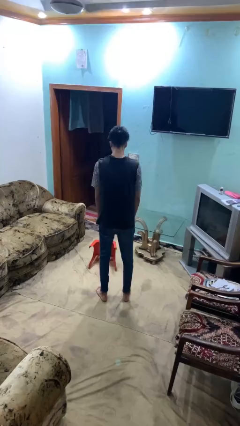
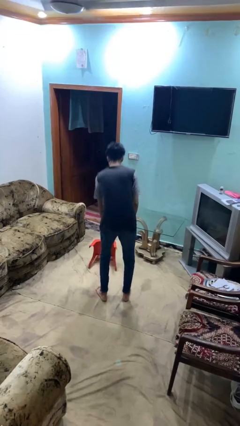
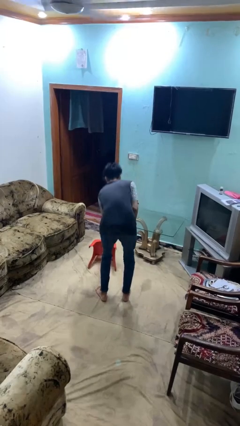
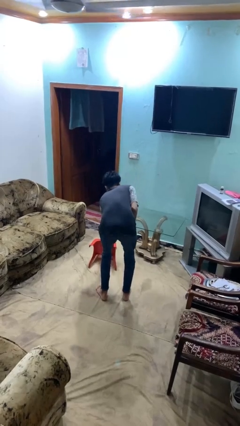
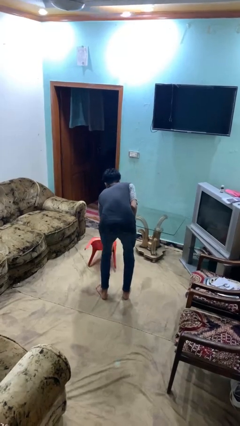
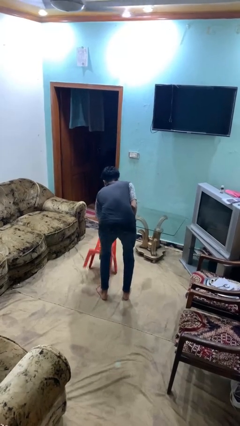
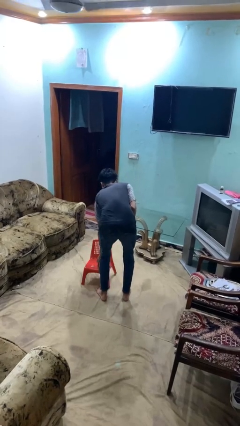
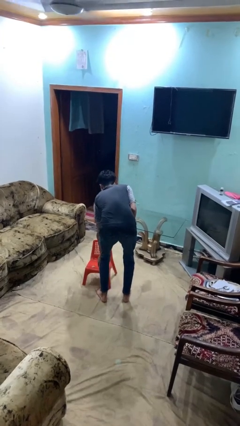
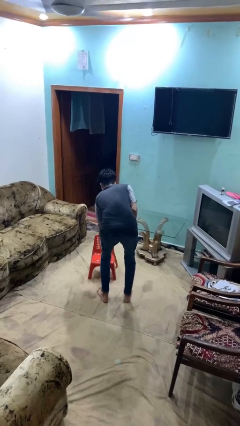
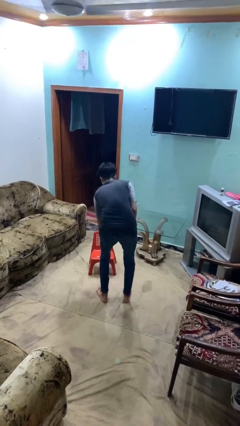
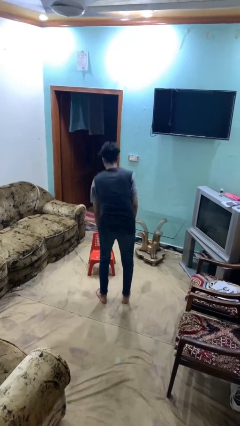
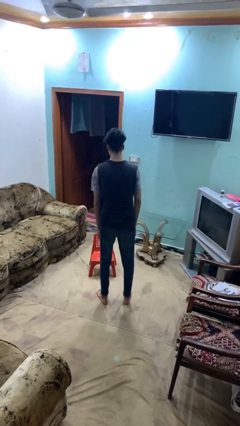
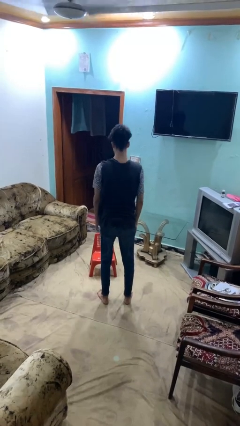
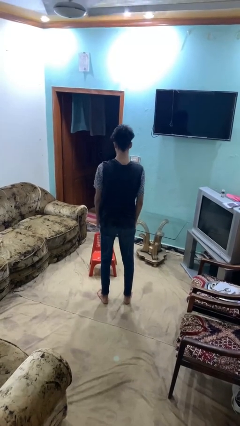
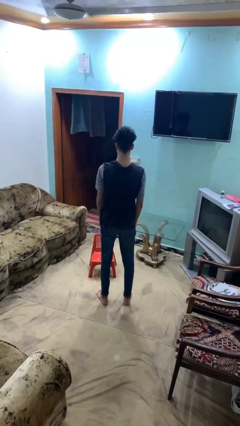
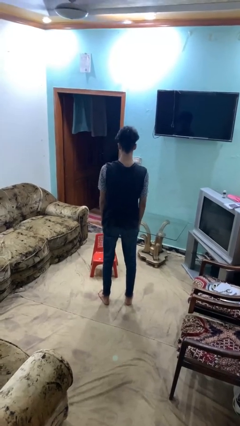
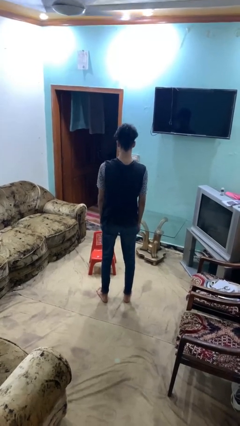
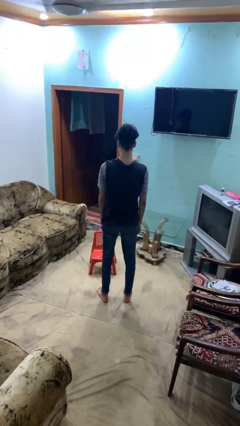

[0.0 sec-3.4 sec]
person sets upright furniture

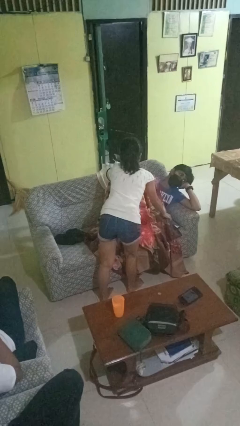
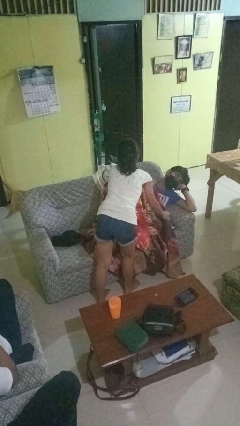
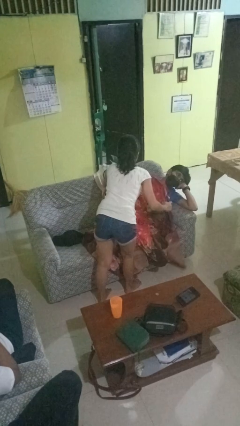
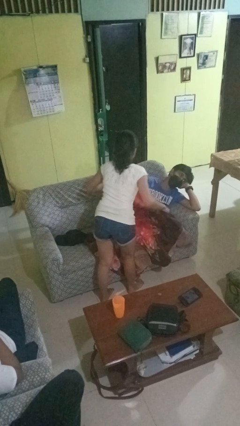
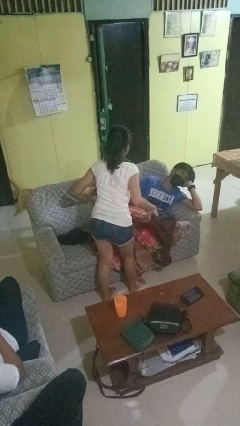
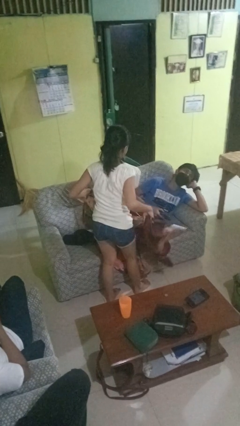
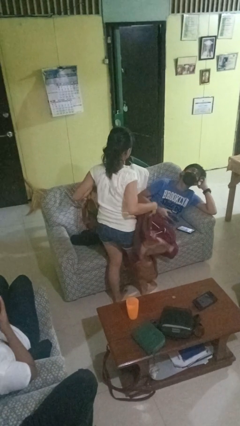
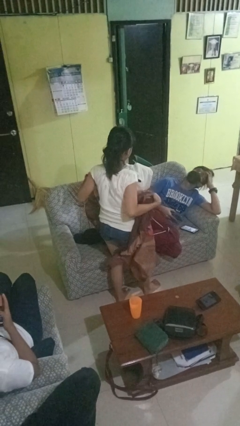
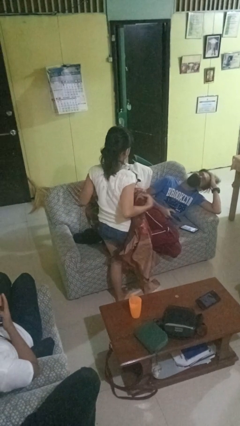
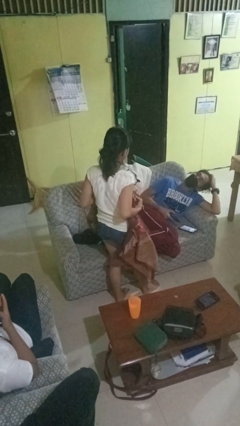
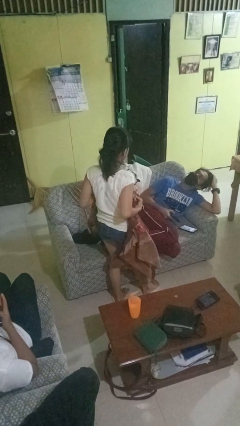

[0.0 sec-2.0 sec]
person uncovers friend with blanket

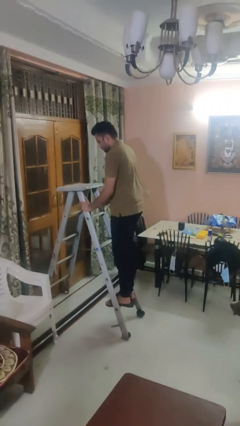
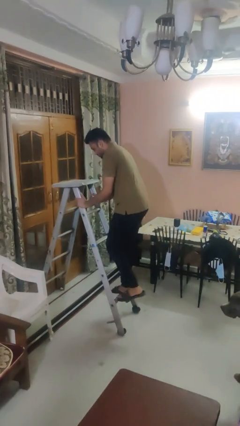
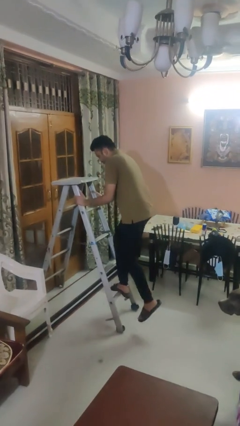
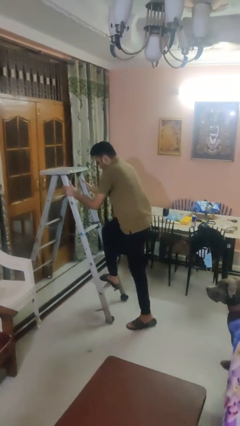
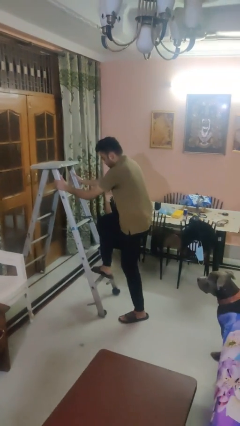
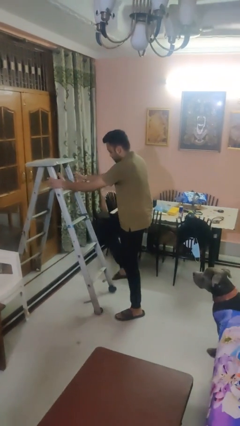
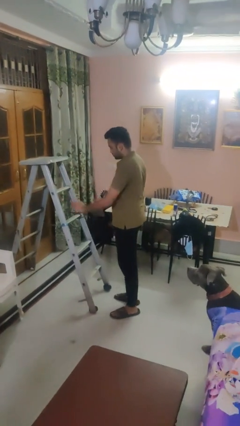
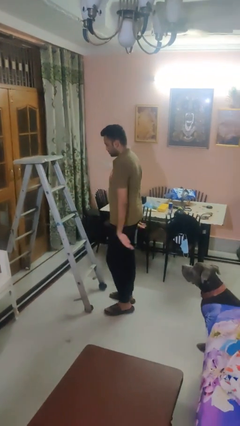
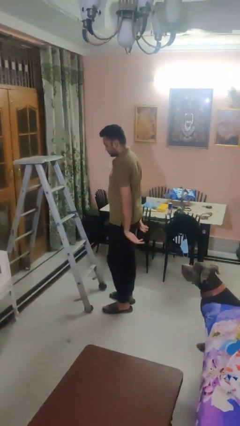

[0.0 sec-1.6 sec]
person climbs down ladder

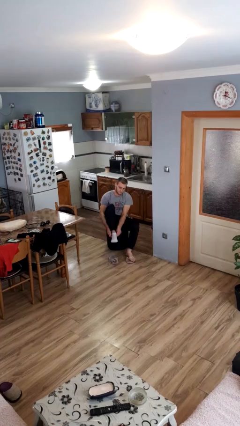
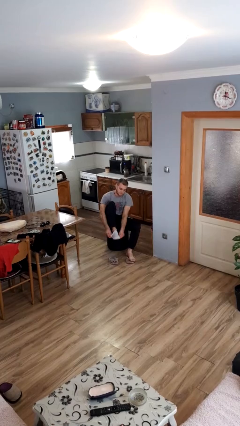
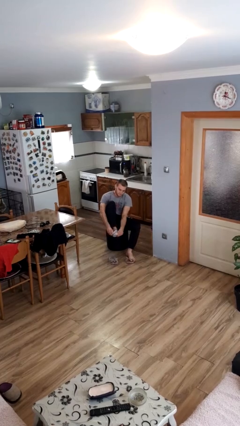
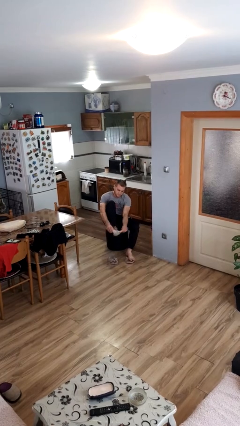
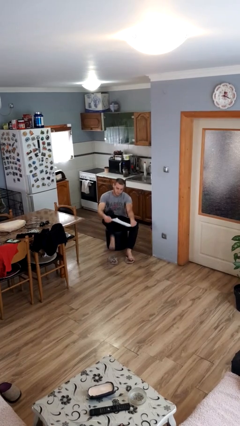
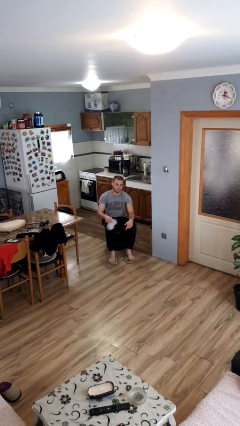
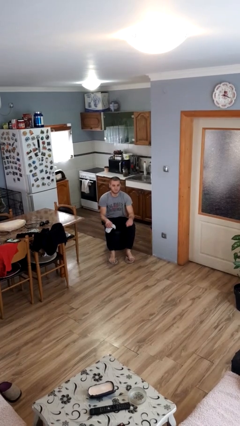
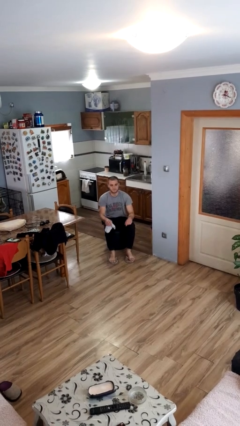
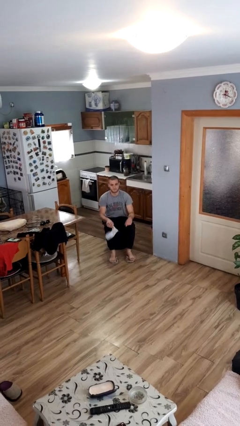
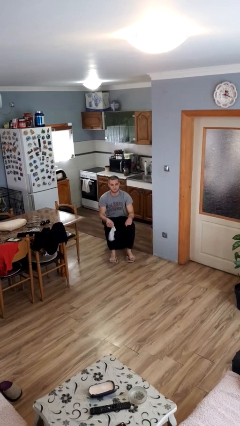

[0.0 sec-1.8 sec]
person takes off socks

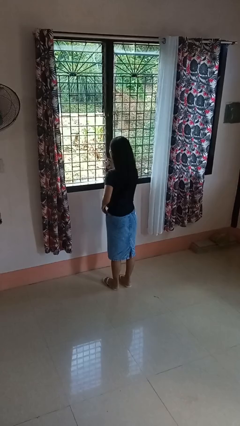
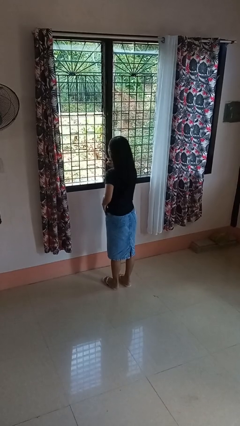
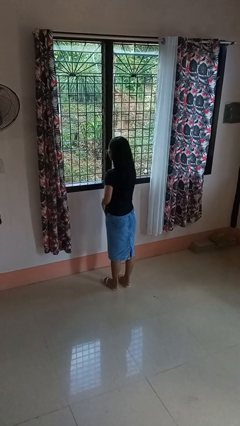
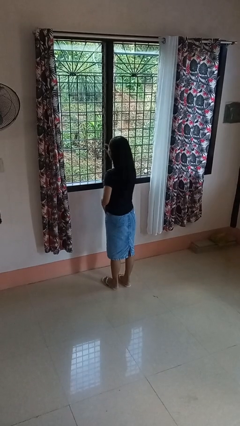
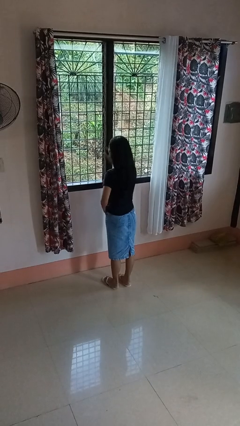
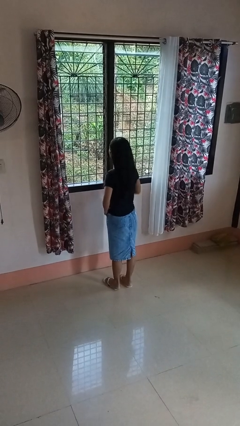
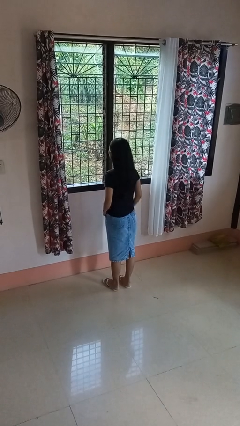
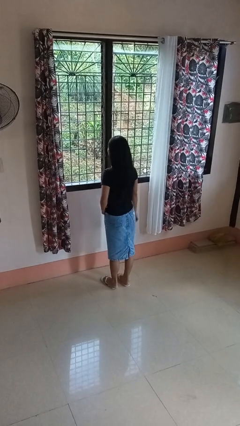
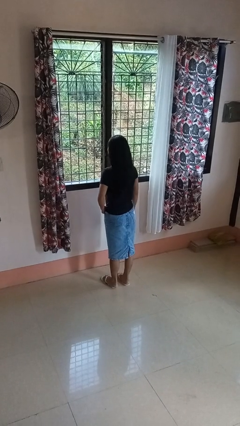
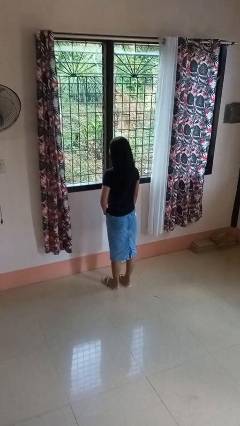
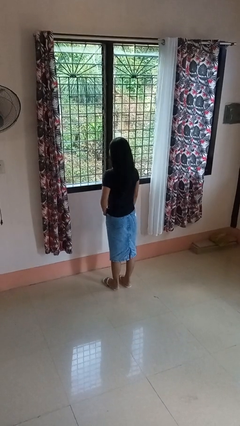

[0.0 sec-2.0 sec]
person closes home window

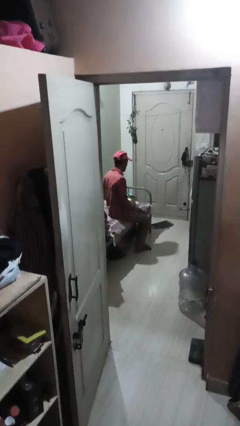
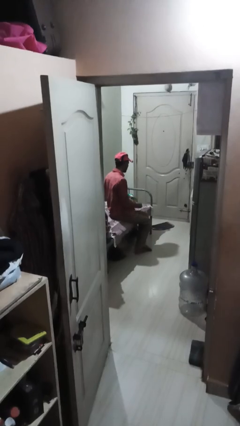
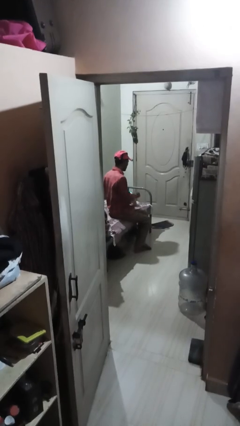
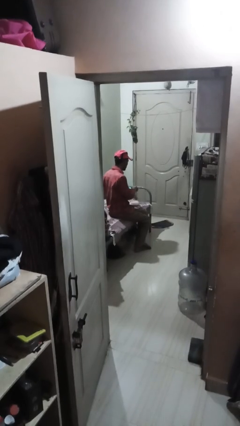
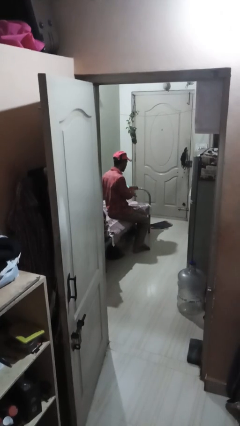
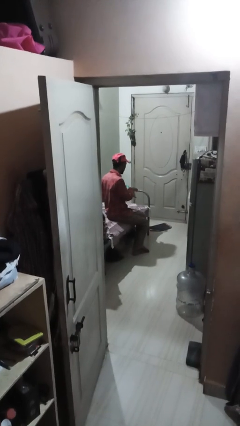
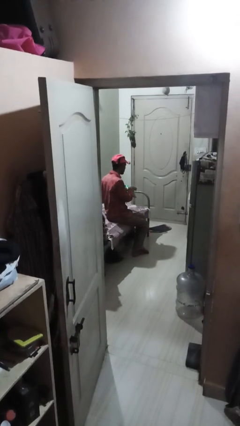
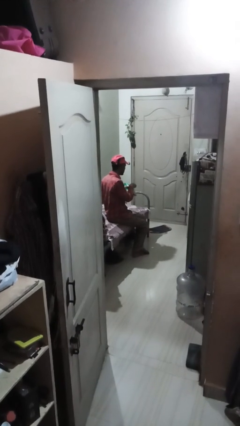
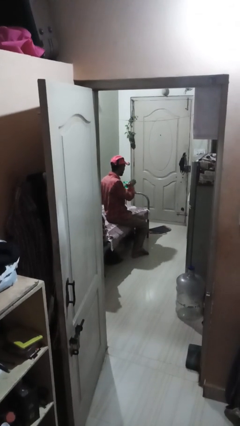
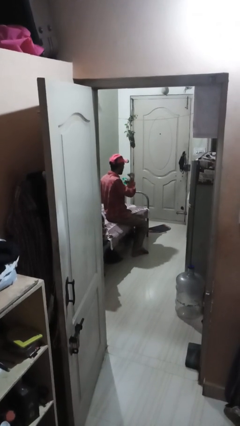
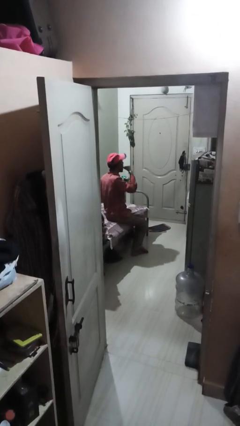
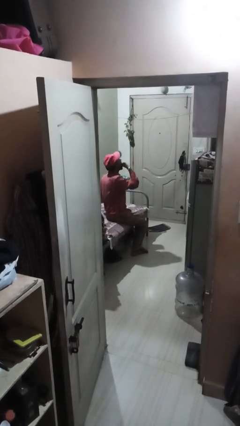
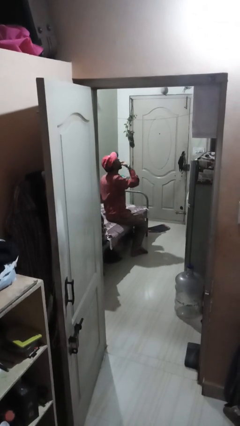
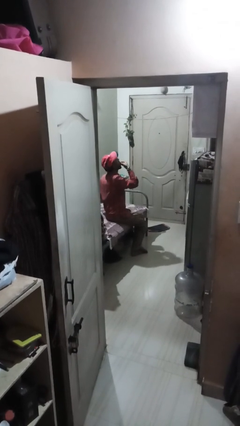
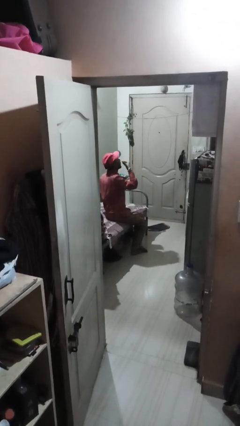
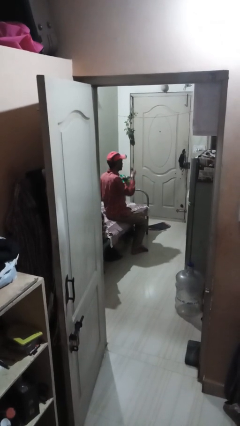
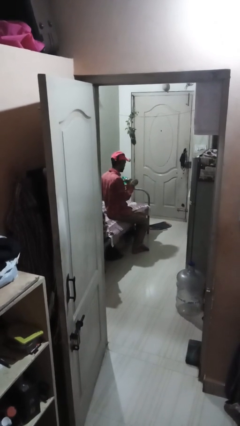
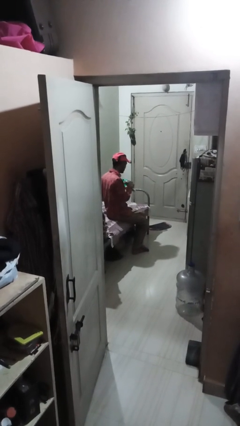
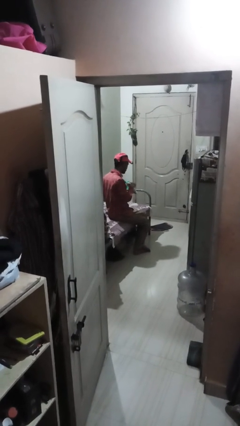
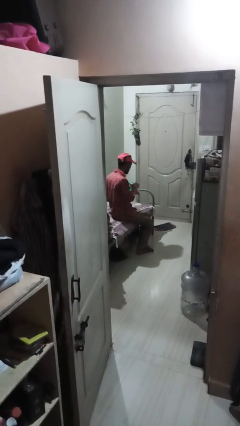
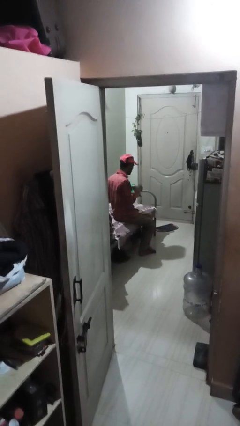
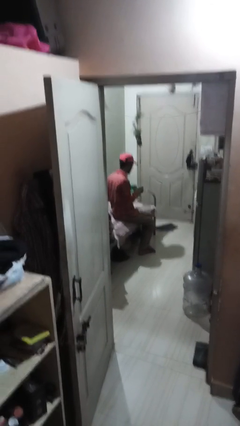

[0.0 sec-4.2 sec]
person eats snack from bag

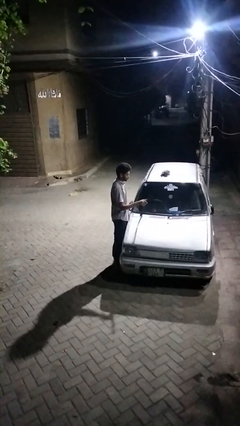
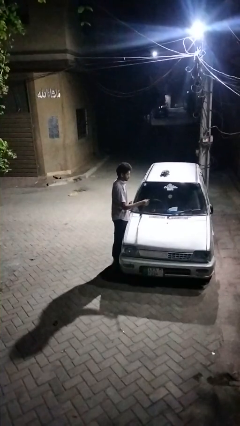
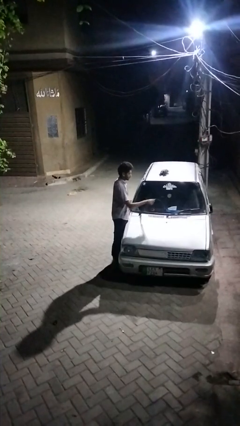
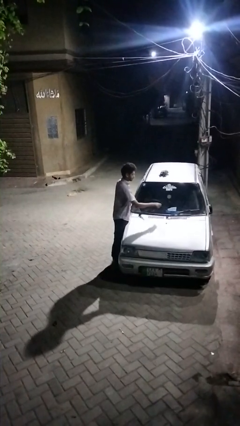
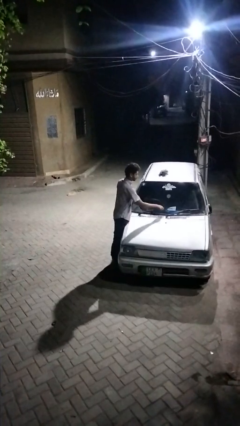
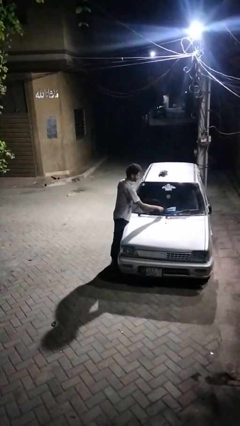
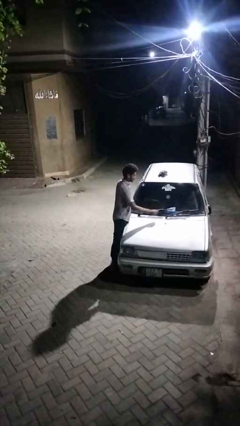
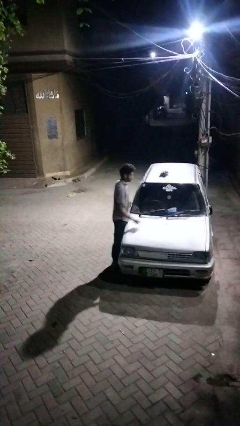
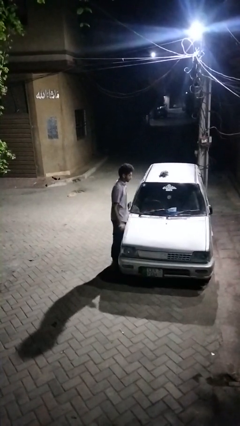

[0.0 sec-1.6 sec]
person flips down car wipers

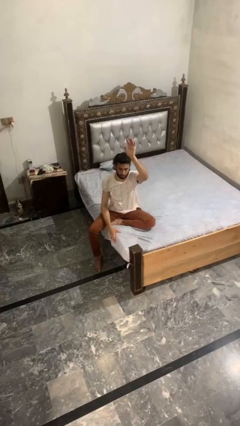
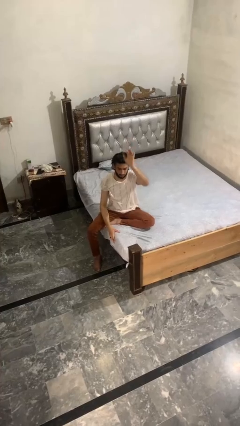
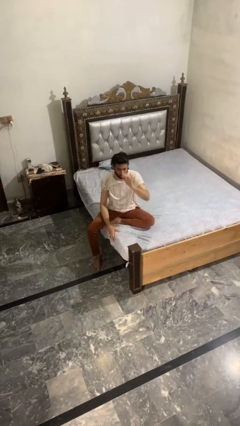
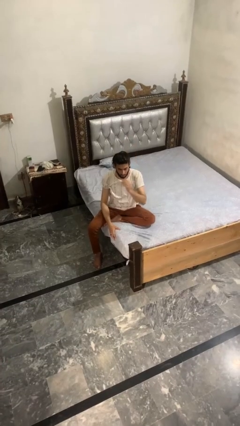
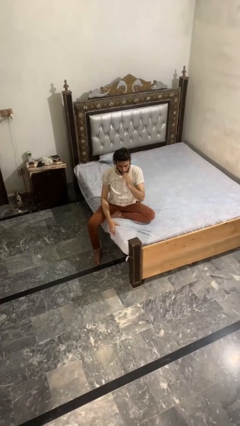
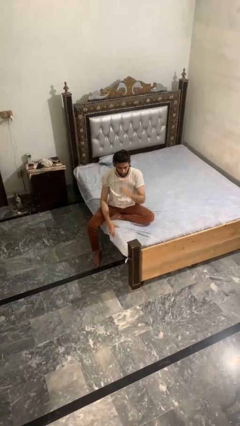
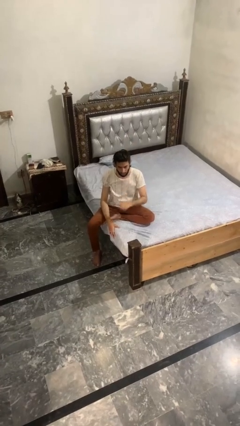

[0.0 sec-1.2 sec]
person gestures lower hand
